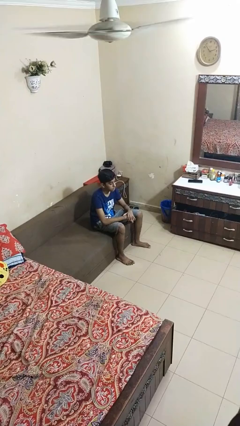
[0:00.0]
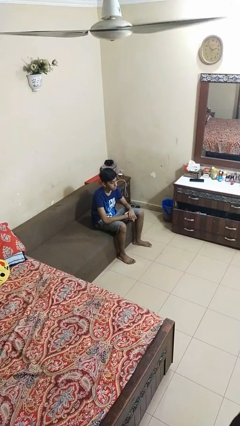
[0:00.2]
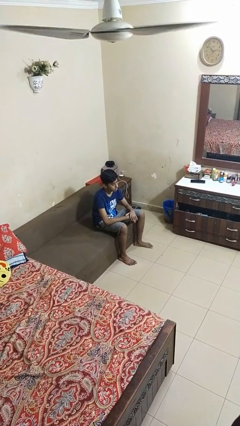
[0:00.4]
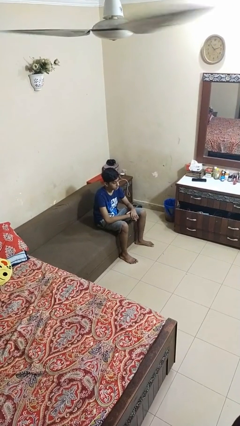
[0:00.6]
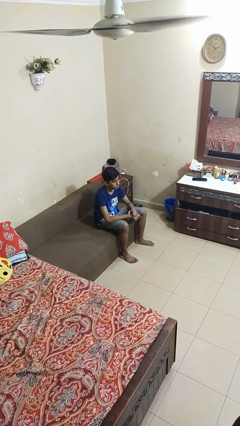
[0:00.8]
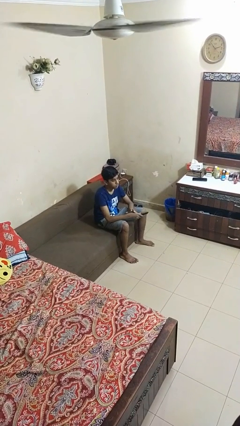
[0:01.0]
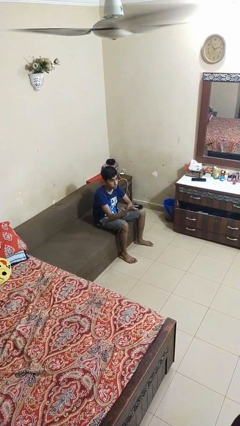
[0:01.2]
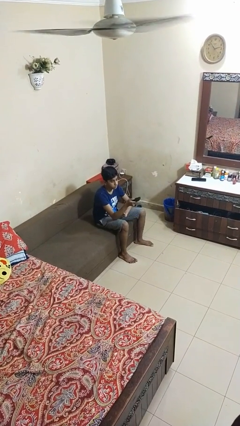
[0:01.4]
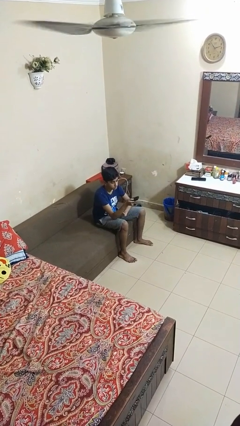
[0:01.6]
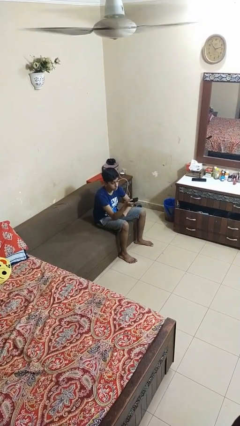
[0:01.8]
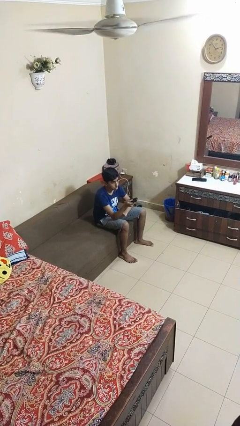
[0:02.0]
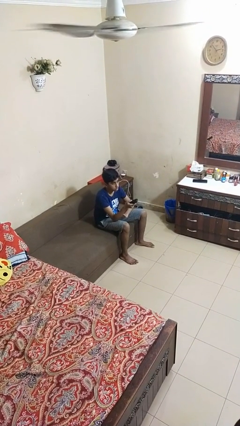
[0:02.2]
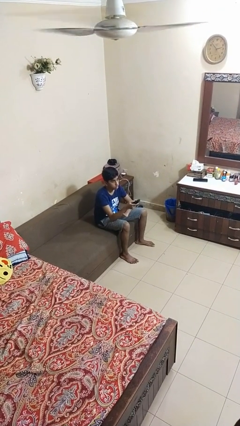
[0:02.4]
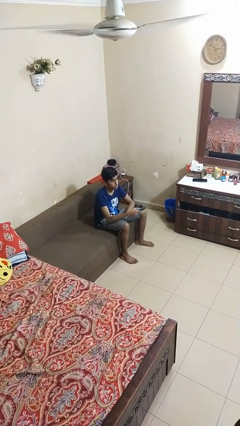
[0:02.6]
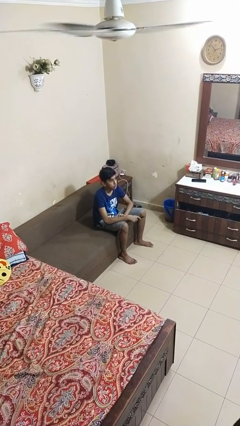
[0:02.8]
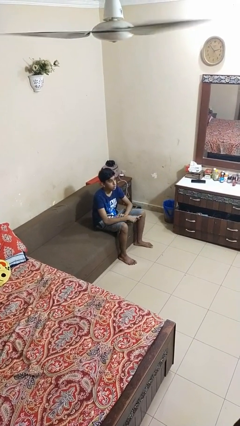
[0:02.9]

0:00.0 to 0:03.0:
person uses television remote

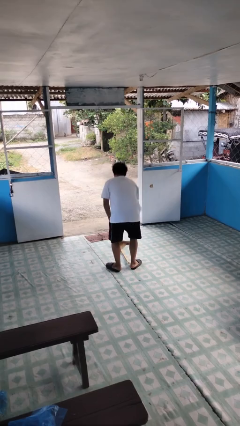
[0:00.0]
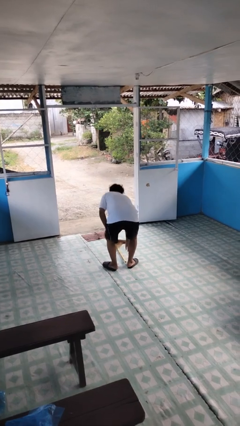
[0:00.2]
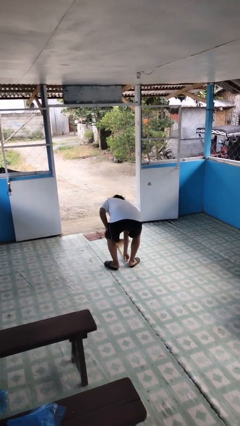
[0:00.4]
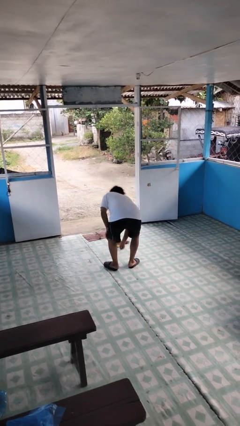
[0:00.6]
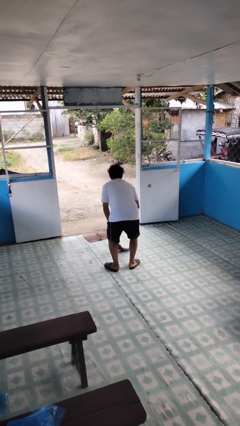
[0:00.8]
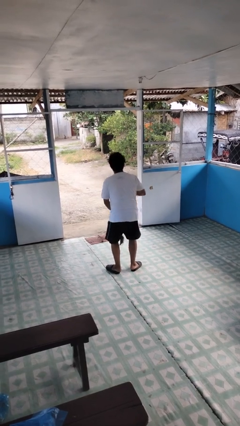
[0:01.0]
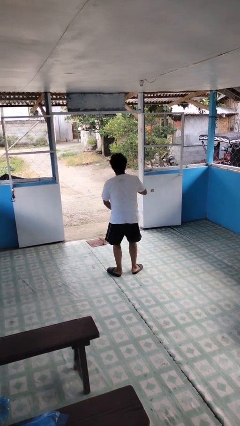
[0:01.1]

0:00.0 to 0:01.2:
person picks up object from floor

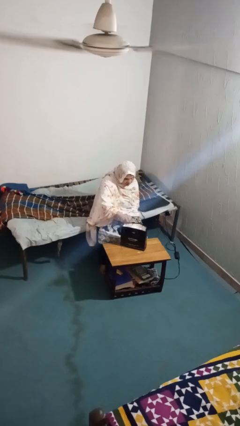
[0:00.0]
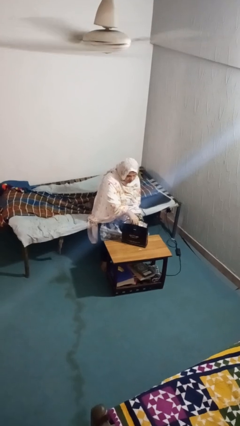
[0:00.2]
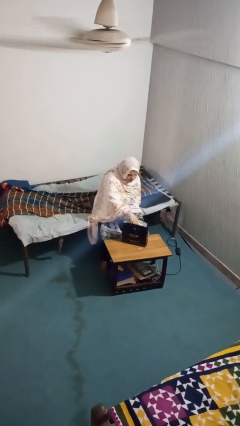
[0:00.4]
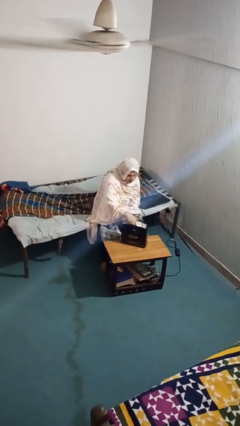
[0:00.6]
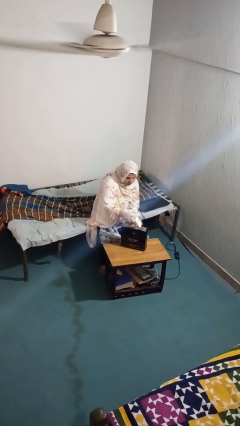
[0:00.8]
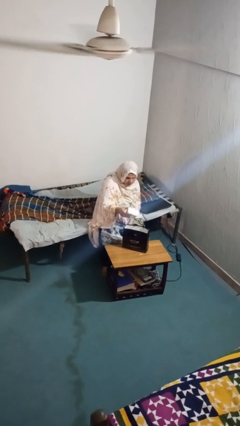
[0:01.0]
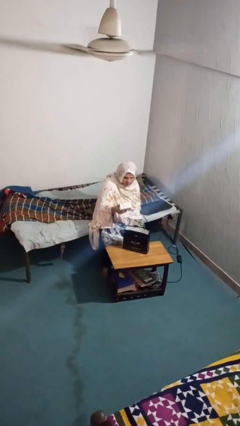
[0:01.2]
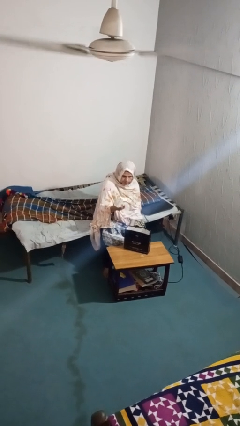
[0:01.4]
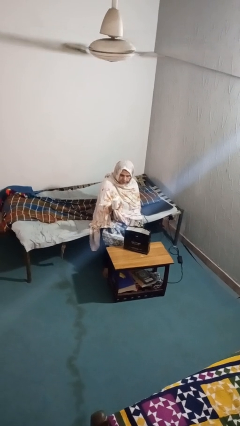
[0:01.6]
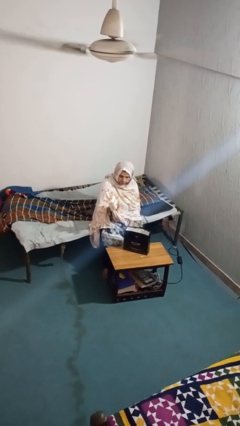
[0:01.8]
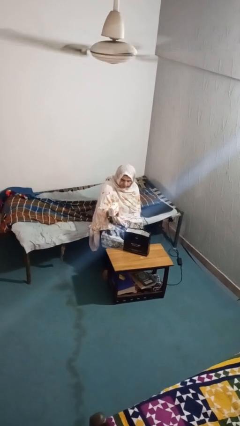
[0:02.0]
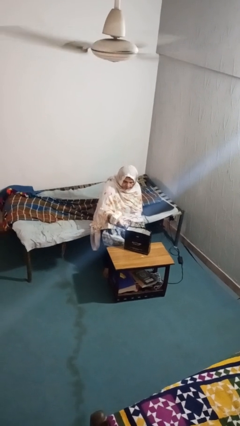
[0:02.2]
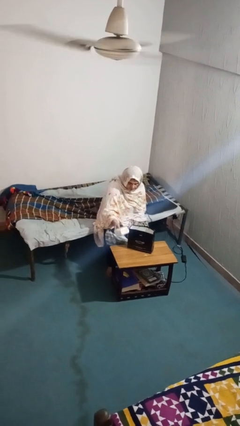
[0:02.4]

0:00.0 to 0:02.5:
person takes object from bag

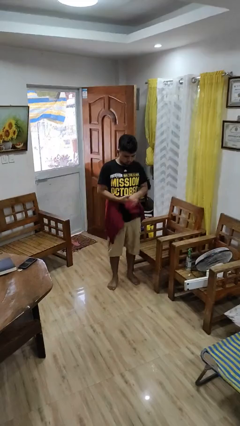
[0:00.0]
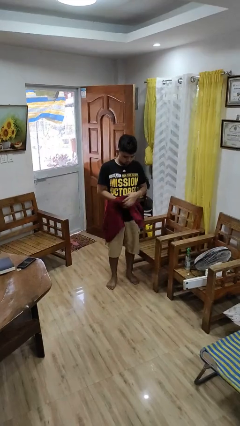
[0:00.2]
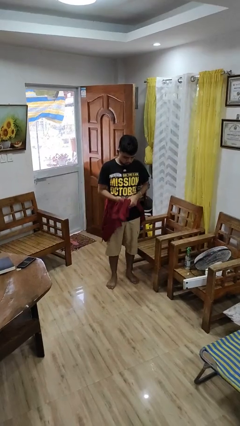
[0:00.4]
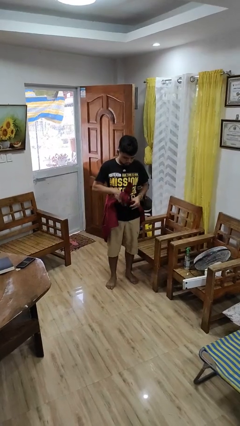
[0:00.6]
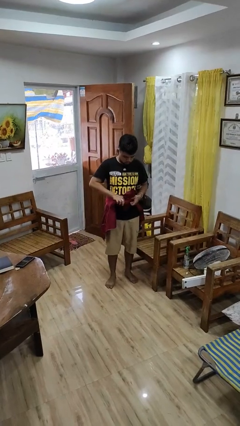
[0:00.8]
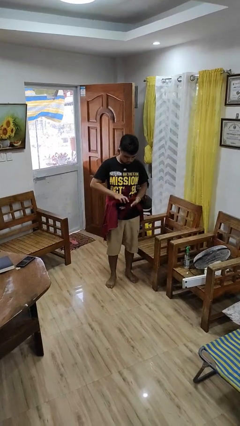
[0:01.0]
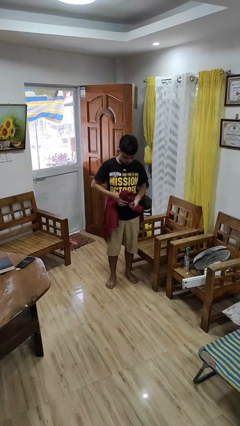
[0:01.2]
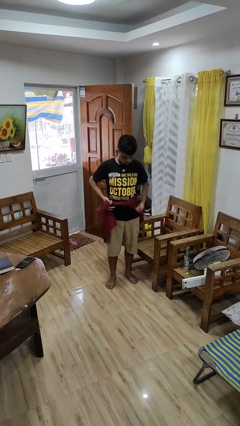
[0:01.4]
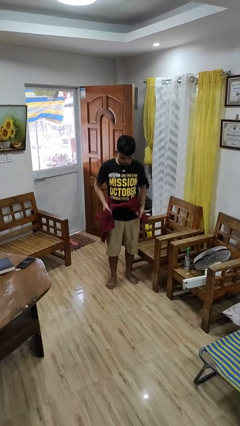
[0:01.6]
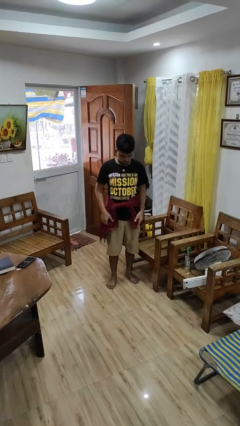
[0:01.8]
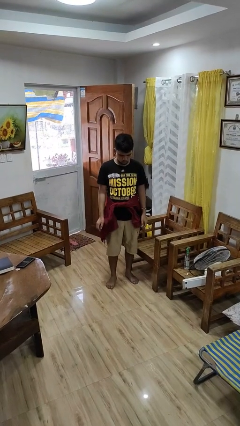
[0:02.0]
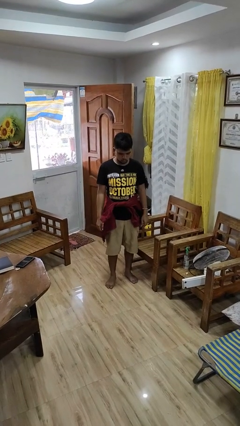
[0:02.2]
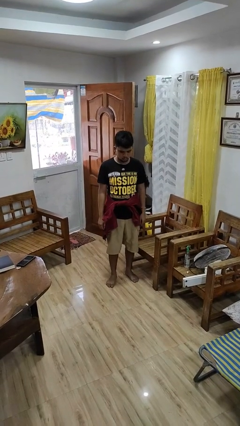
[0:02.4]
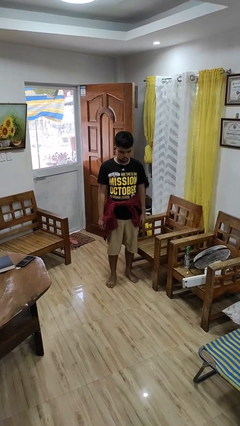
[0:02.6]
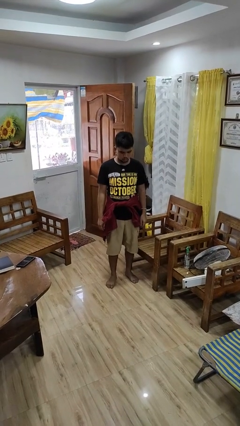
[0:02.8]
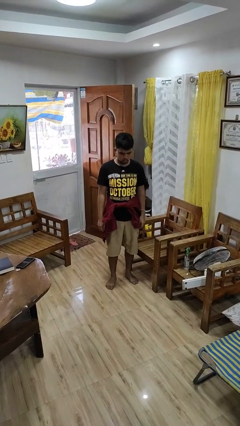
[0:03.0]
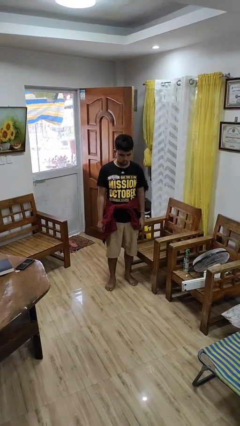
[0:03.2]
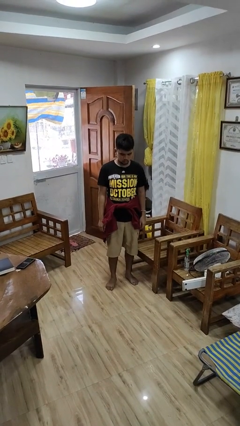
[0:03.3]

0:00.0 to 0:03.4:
person ties jacket around waist

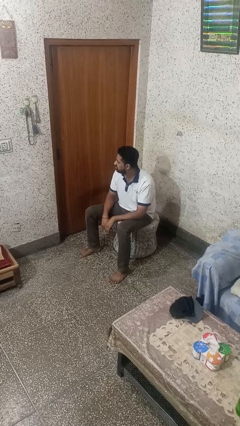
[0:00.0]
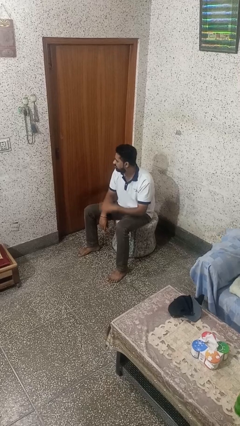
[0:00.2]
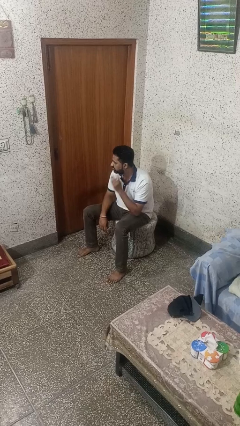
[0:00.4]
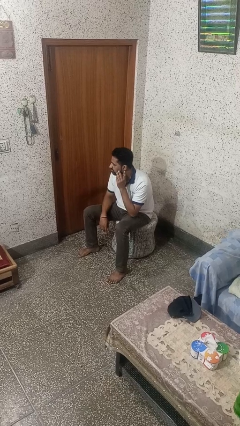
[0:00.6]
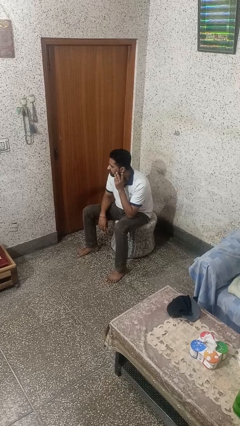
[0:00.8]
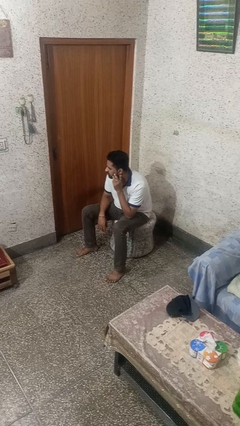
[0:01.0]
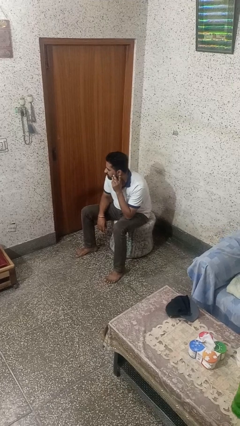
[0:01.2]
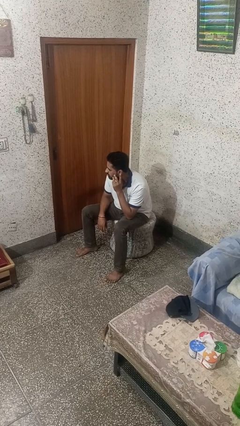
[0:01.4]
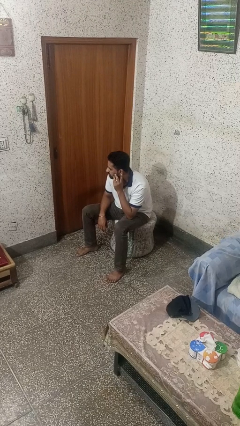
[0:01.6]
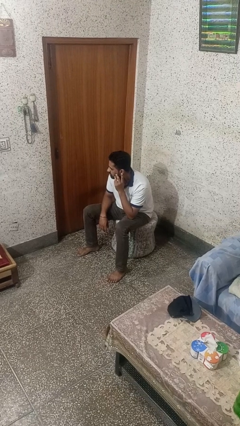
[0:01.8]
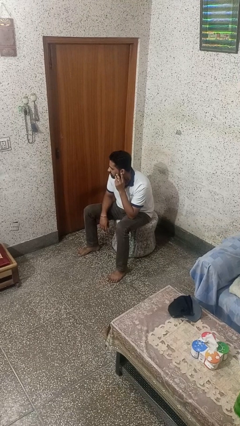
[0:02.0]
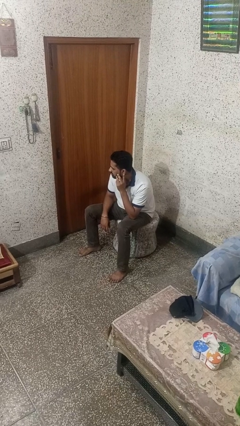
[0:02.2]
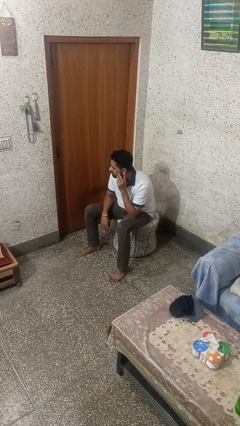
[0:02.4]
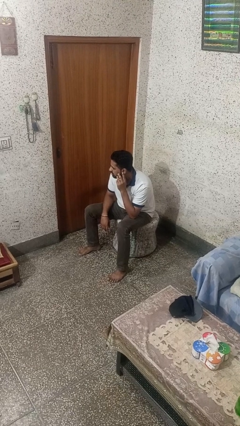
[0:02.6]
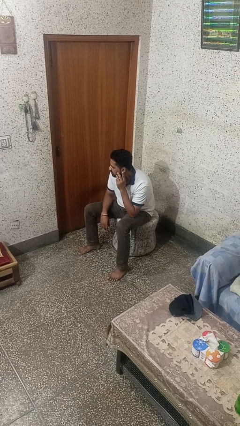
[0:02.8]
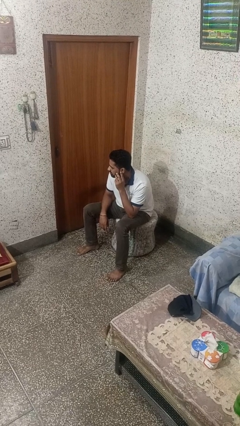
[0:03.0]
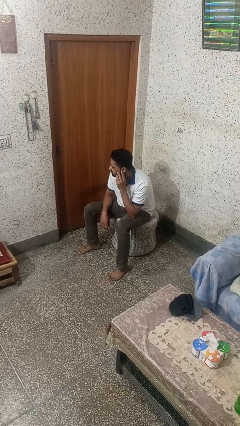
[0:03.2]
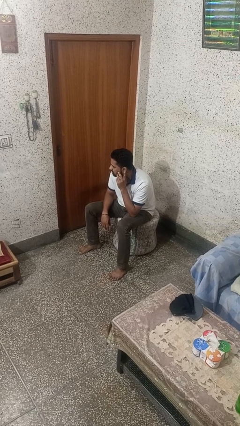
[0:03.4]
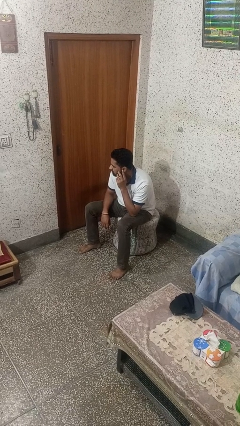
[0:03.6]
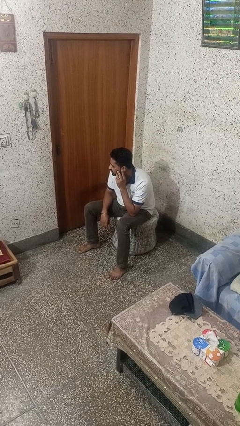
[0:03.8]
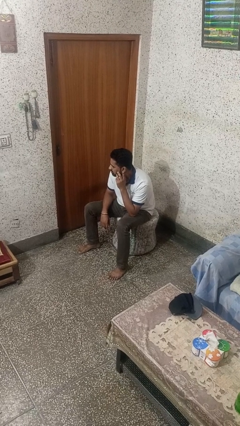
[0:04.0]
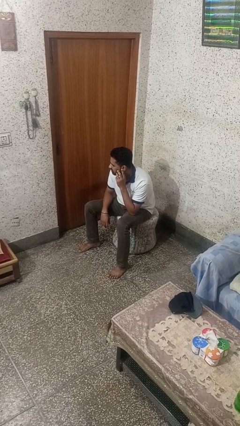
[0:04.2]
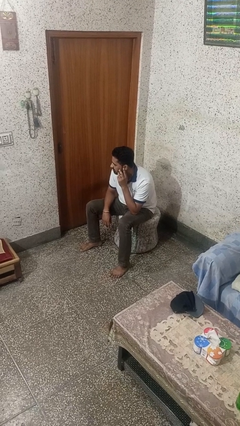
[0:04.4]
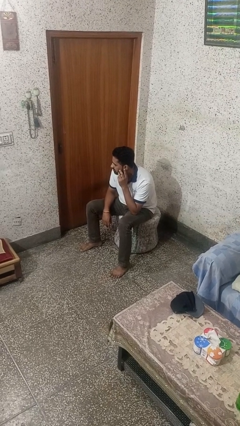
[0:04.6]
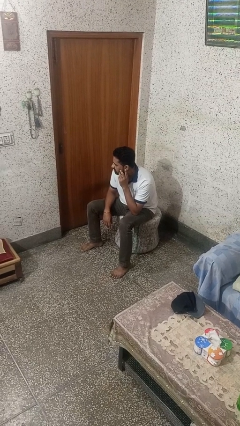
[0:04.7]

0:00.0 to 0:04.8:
person gestures listen closely

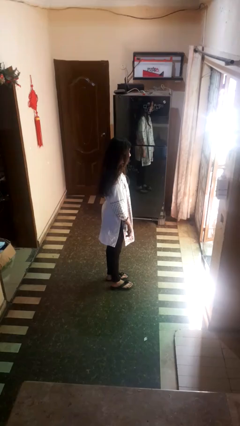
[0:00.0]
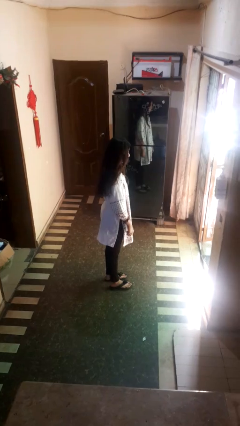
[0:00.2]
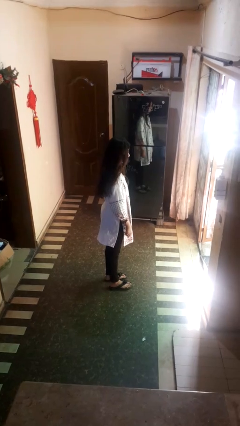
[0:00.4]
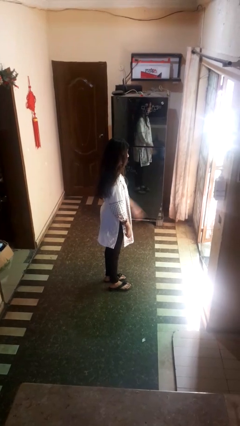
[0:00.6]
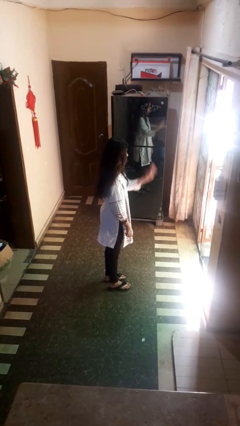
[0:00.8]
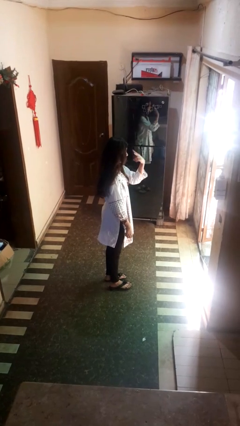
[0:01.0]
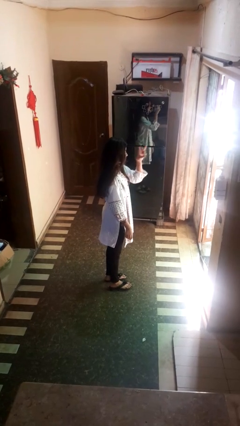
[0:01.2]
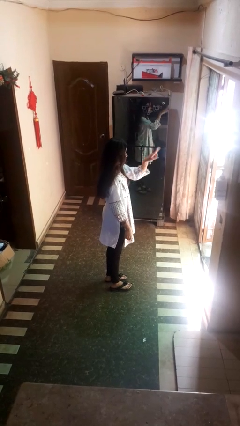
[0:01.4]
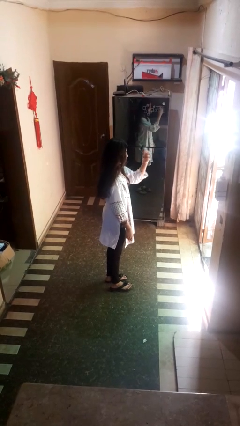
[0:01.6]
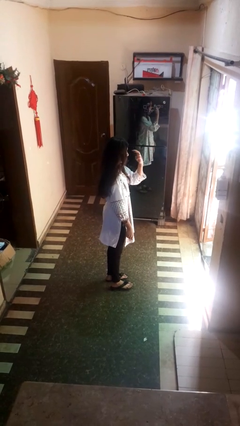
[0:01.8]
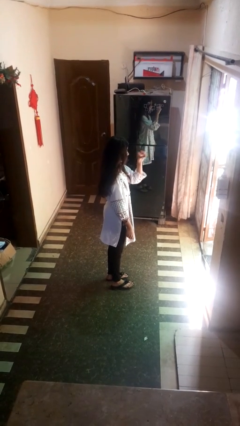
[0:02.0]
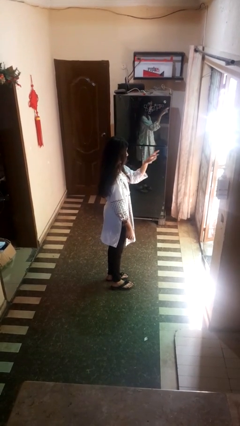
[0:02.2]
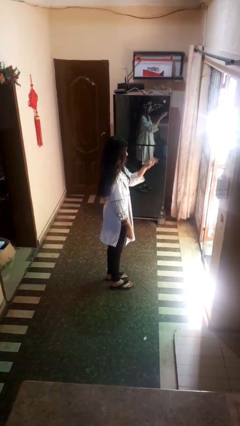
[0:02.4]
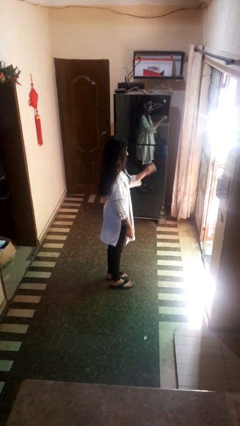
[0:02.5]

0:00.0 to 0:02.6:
person gestures watch closely

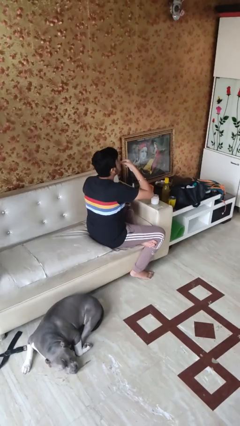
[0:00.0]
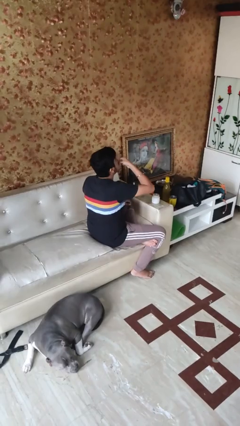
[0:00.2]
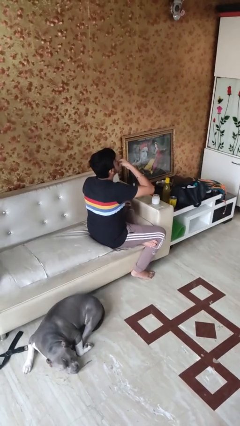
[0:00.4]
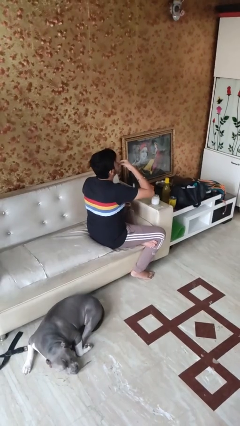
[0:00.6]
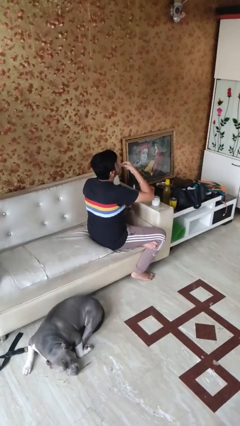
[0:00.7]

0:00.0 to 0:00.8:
person takes medicine pills
